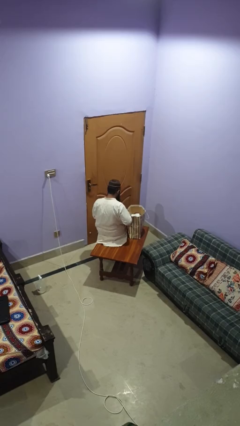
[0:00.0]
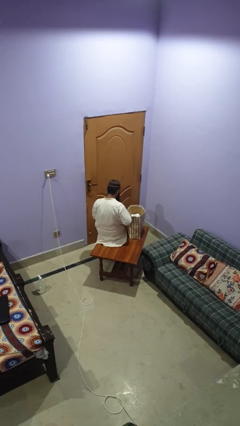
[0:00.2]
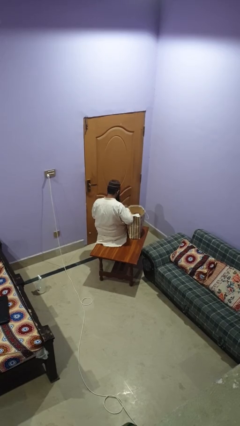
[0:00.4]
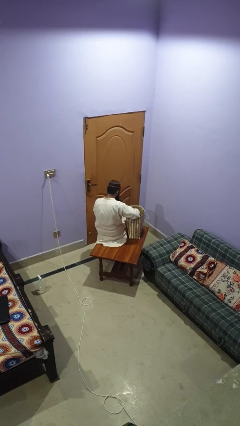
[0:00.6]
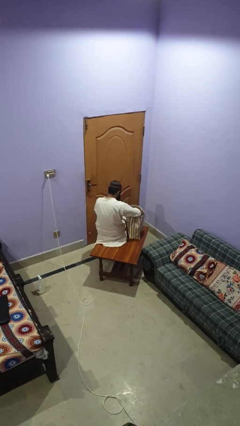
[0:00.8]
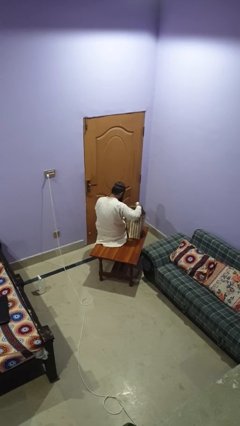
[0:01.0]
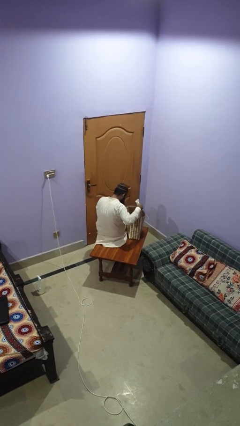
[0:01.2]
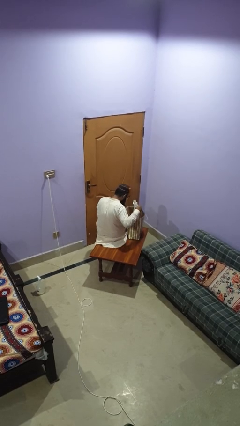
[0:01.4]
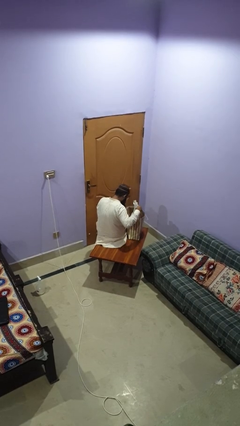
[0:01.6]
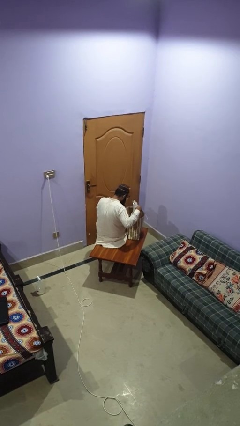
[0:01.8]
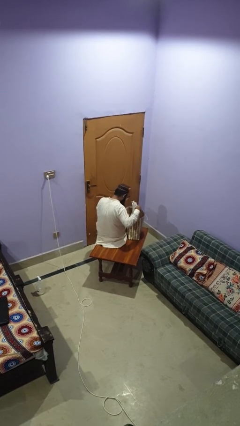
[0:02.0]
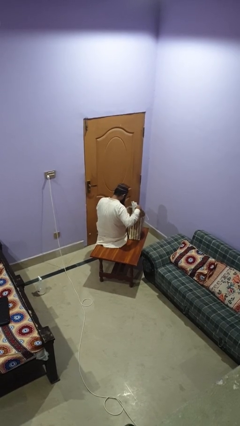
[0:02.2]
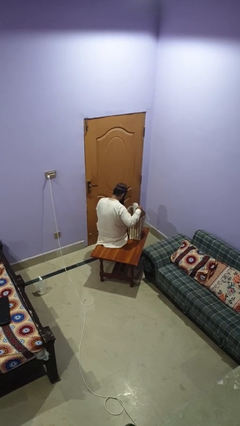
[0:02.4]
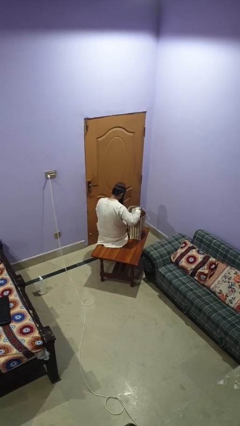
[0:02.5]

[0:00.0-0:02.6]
person searches in bag

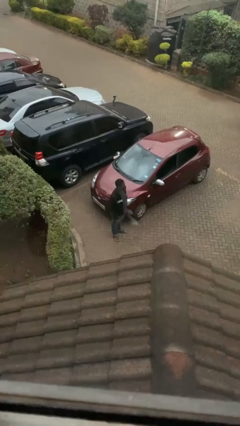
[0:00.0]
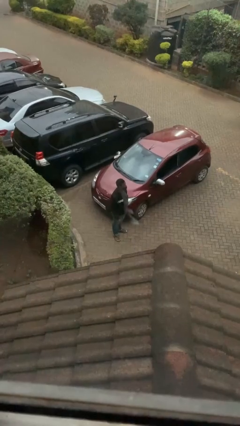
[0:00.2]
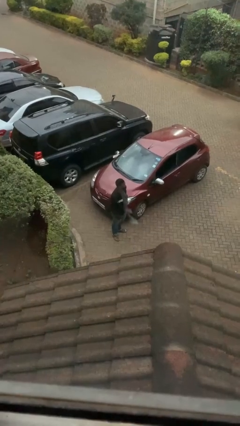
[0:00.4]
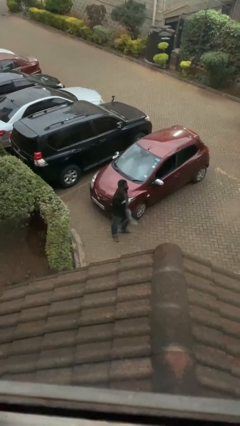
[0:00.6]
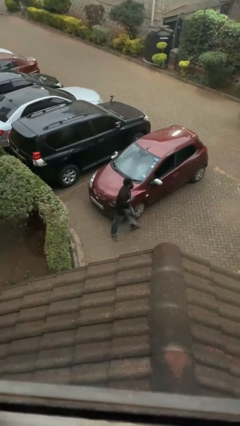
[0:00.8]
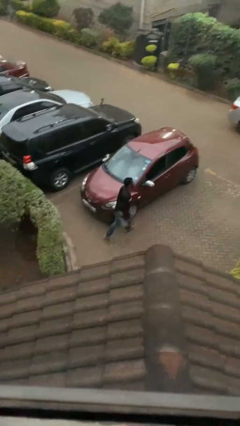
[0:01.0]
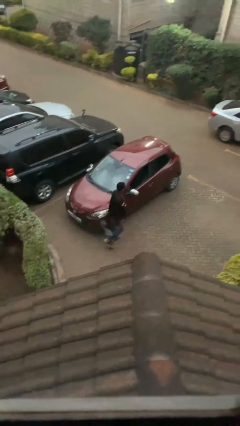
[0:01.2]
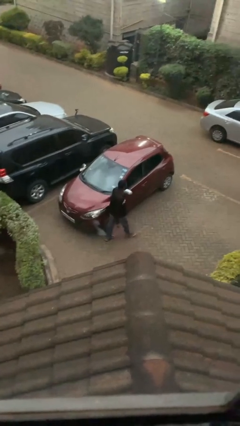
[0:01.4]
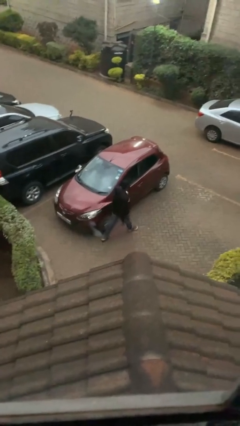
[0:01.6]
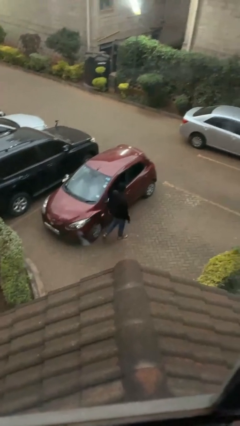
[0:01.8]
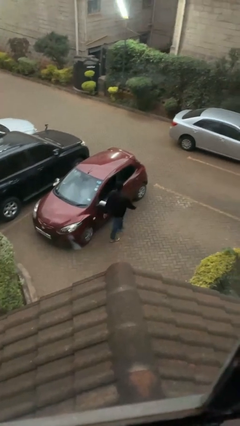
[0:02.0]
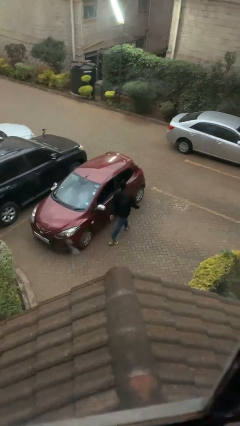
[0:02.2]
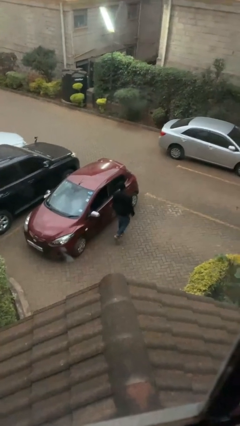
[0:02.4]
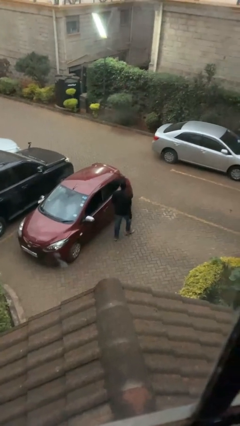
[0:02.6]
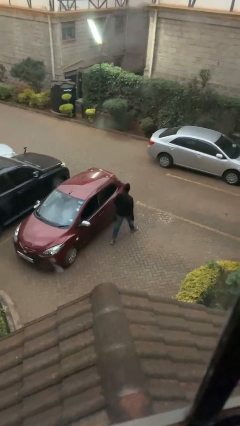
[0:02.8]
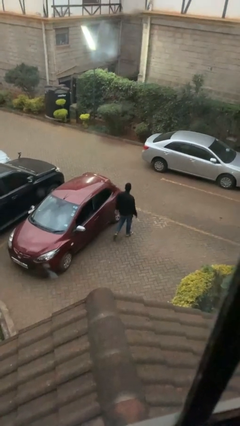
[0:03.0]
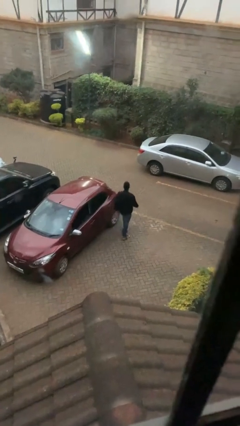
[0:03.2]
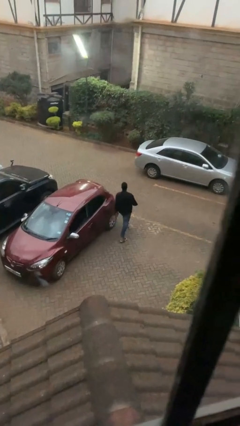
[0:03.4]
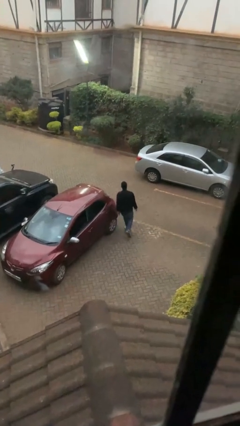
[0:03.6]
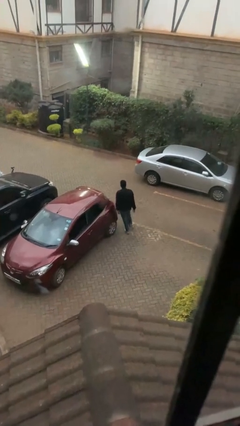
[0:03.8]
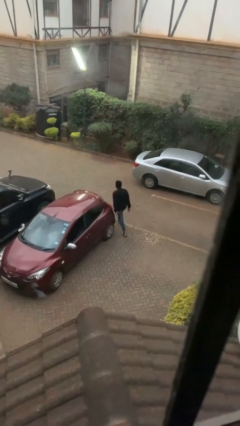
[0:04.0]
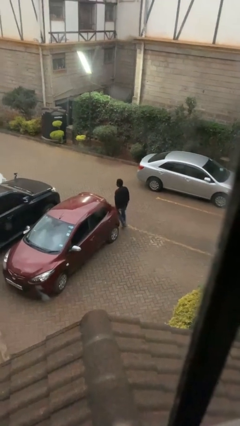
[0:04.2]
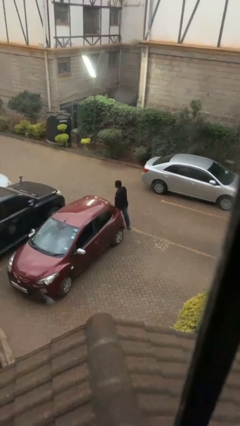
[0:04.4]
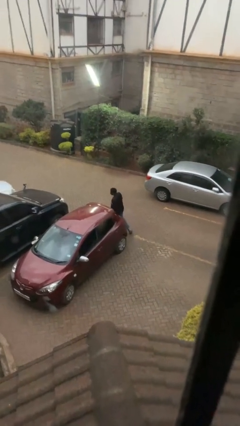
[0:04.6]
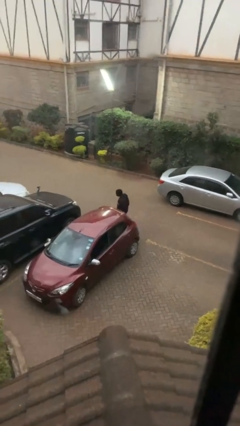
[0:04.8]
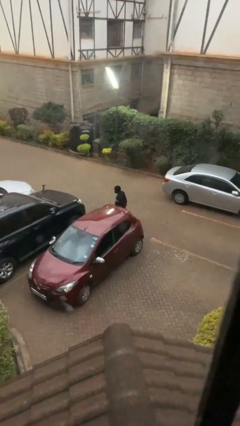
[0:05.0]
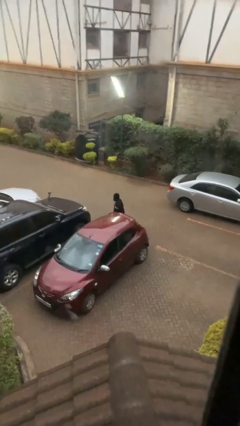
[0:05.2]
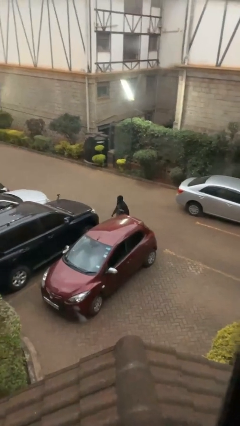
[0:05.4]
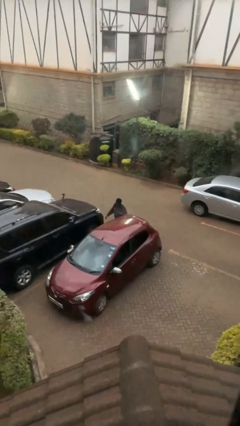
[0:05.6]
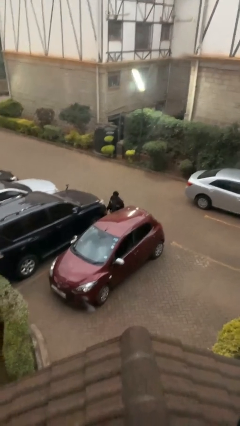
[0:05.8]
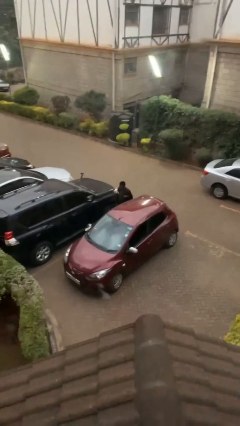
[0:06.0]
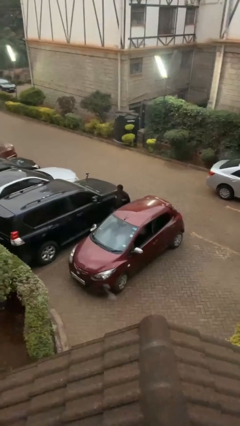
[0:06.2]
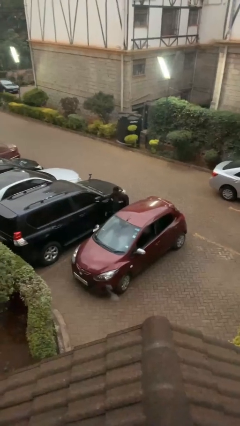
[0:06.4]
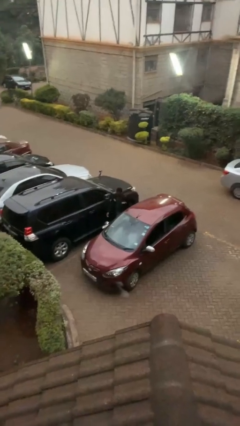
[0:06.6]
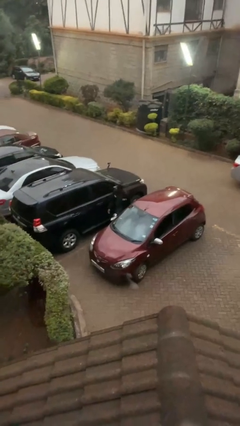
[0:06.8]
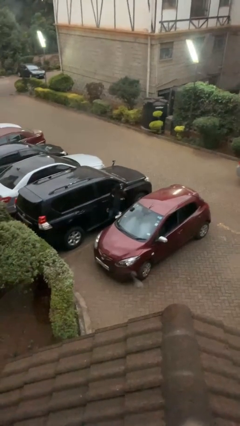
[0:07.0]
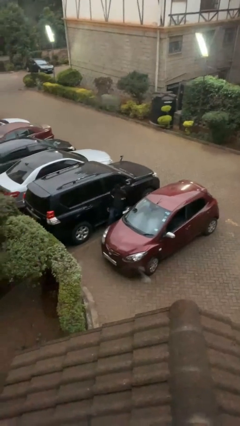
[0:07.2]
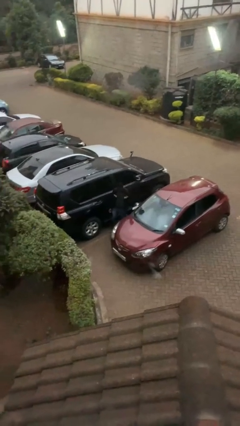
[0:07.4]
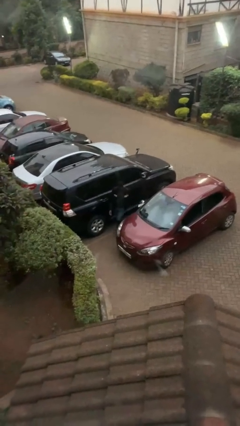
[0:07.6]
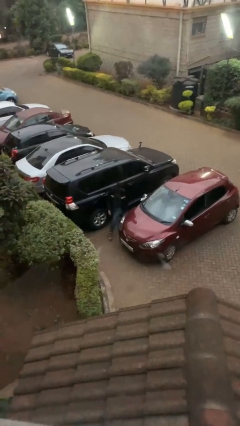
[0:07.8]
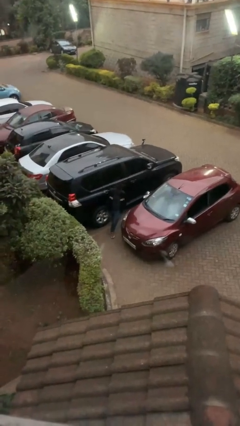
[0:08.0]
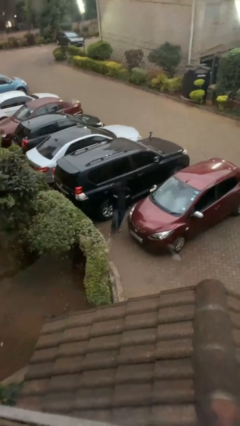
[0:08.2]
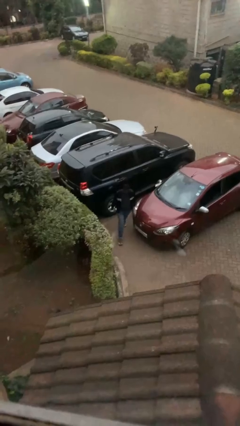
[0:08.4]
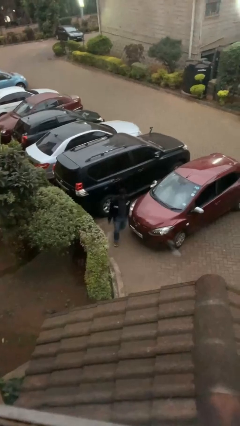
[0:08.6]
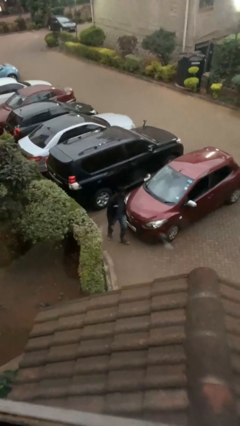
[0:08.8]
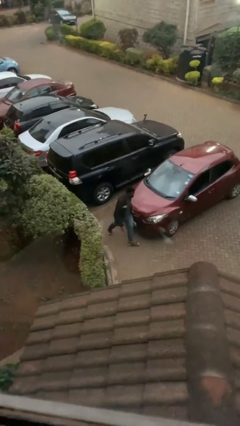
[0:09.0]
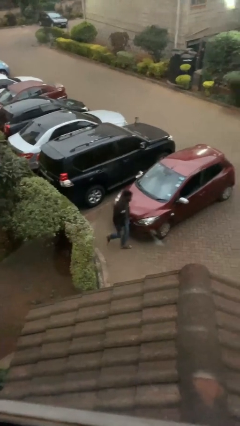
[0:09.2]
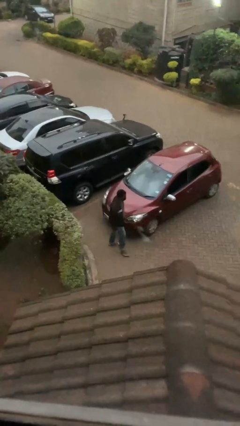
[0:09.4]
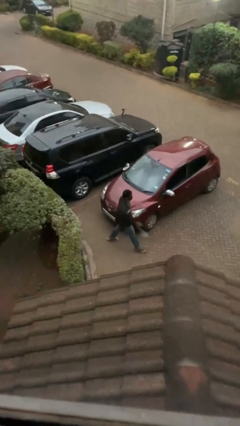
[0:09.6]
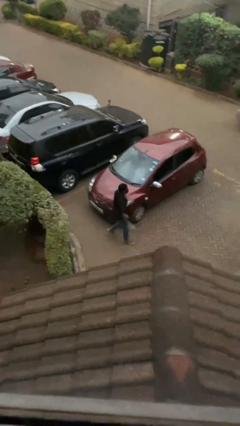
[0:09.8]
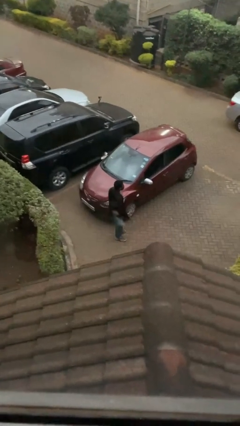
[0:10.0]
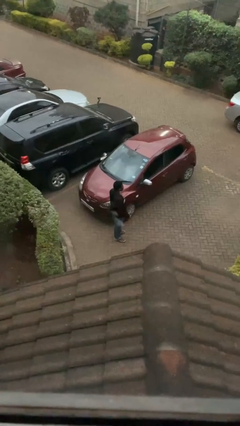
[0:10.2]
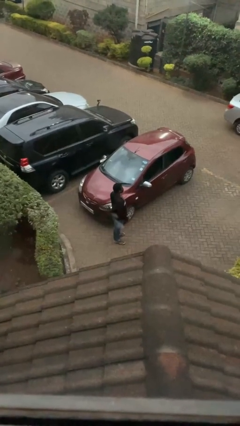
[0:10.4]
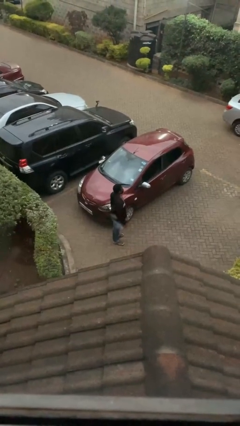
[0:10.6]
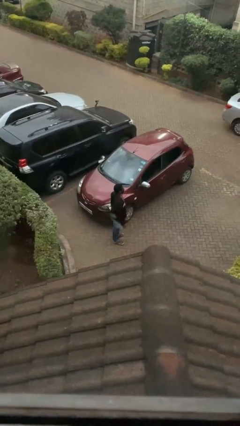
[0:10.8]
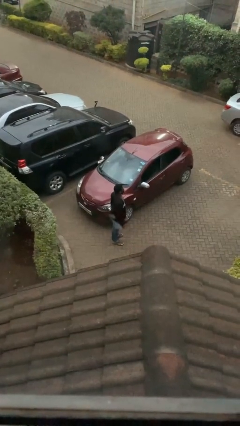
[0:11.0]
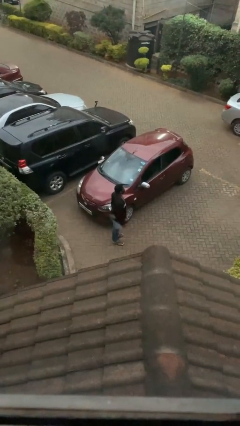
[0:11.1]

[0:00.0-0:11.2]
person walks around car

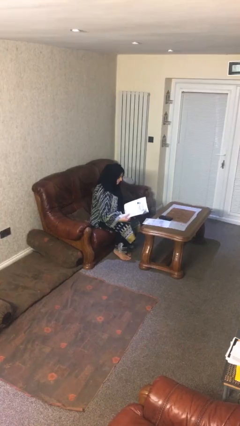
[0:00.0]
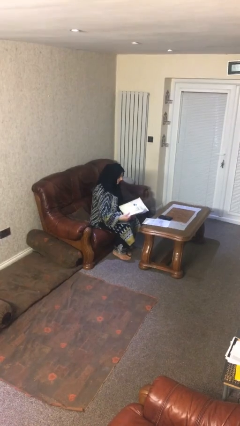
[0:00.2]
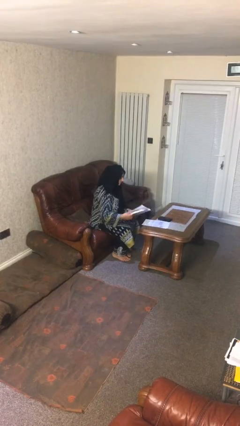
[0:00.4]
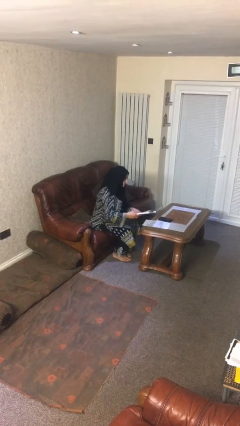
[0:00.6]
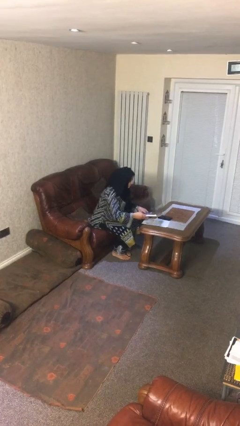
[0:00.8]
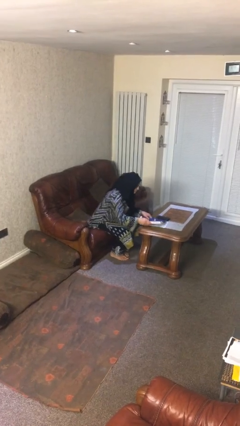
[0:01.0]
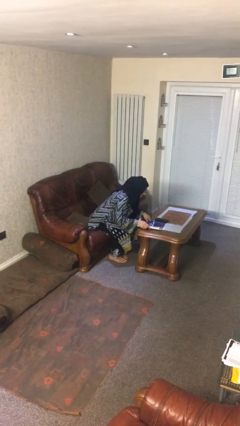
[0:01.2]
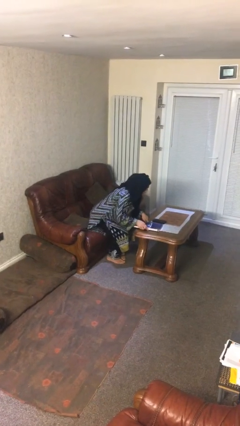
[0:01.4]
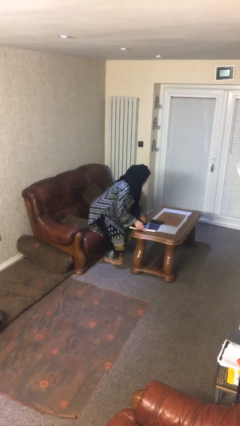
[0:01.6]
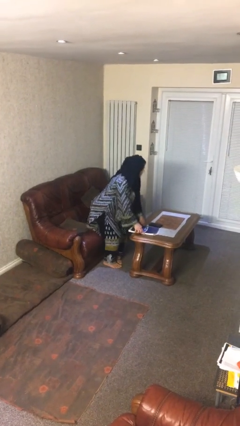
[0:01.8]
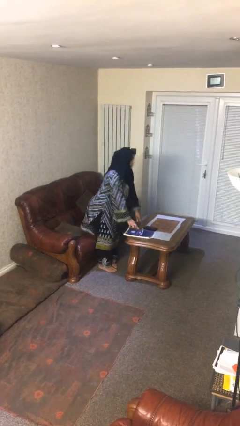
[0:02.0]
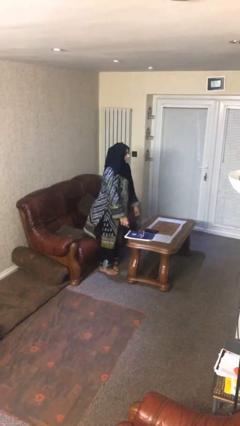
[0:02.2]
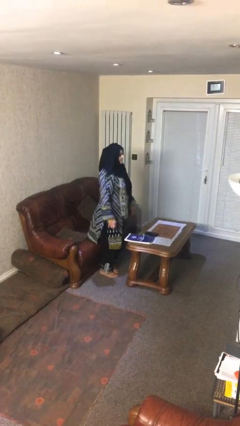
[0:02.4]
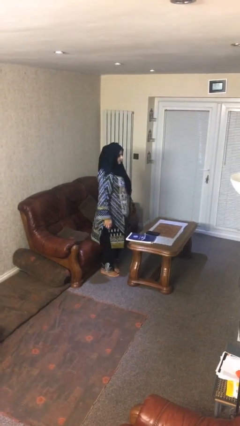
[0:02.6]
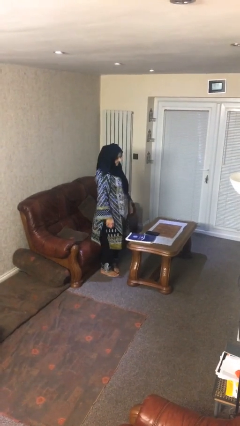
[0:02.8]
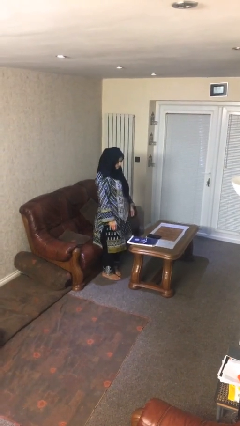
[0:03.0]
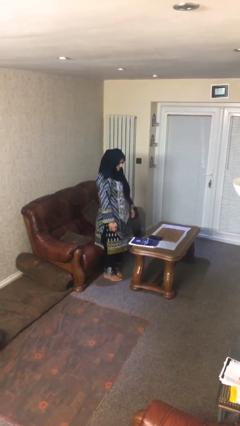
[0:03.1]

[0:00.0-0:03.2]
person stands up

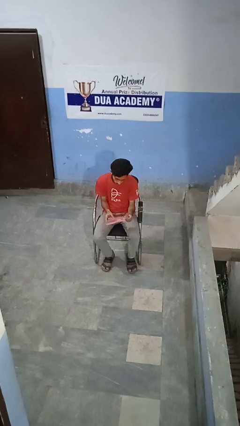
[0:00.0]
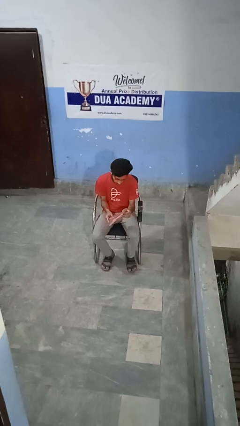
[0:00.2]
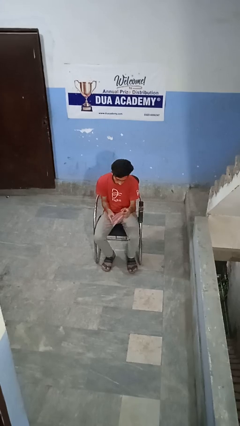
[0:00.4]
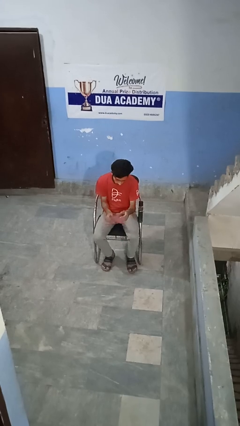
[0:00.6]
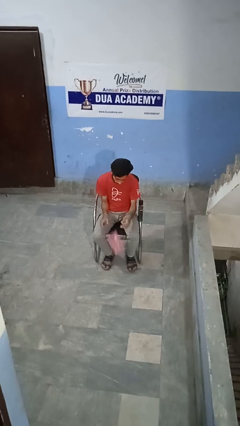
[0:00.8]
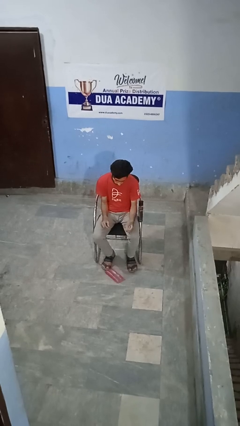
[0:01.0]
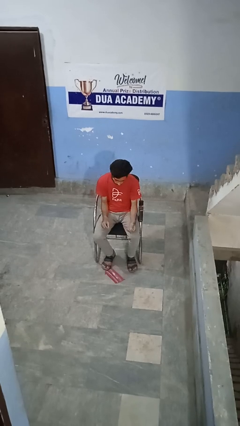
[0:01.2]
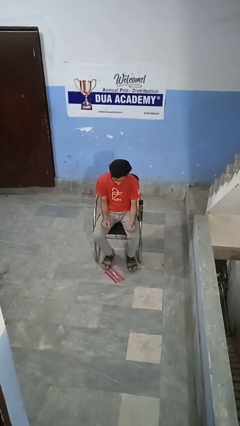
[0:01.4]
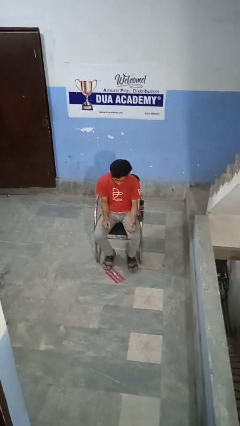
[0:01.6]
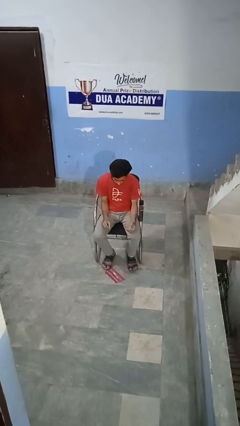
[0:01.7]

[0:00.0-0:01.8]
person drops object
